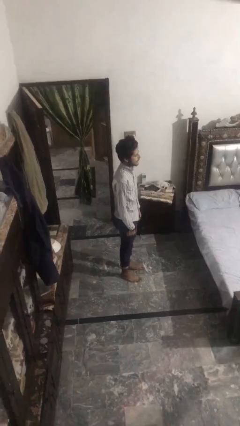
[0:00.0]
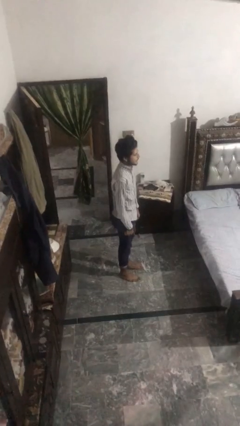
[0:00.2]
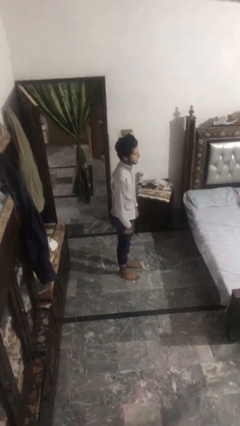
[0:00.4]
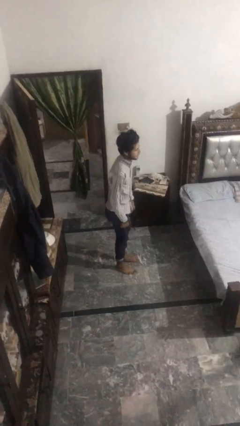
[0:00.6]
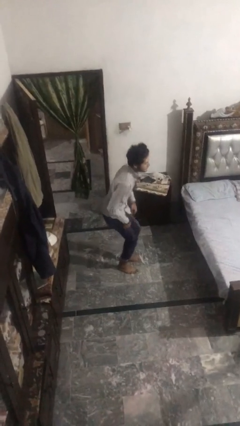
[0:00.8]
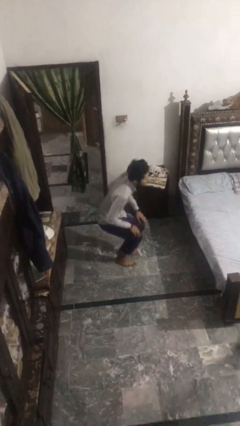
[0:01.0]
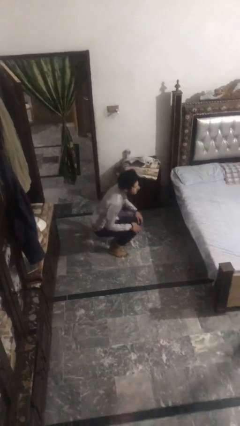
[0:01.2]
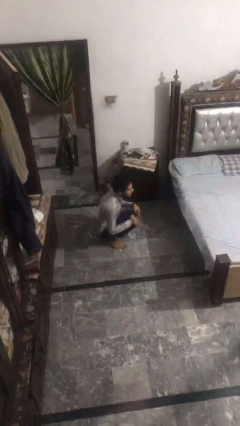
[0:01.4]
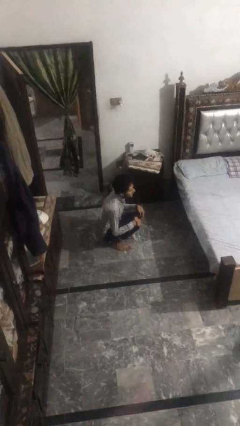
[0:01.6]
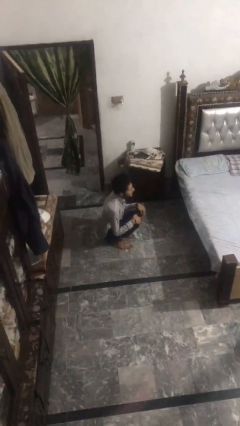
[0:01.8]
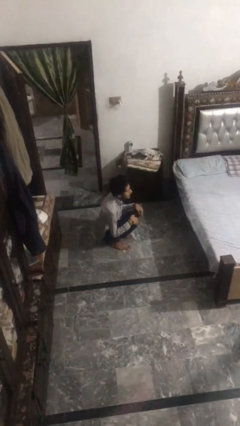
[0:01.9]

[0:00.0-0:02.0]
person squats

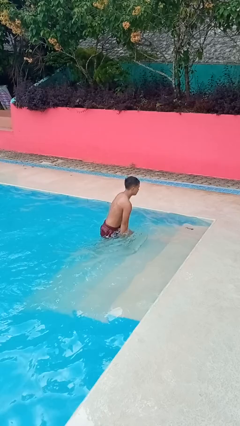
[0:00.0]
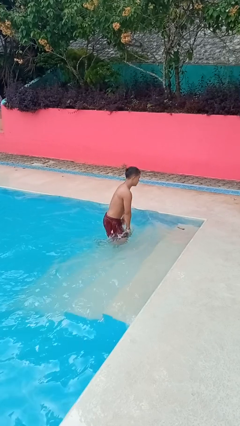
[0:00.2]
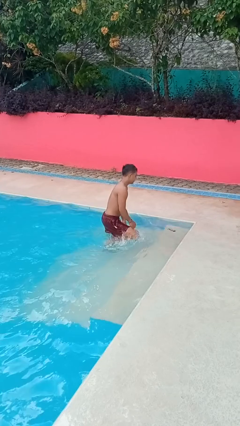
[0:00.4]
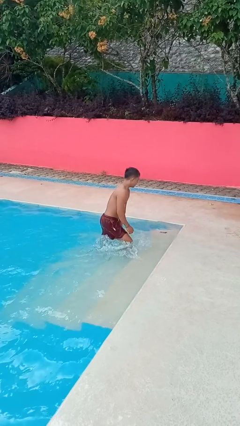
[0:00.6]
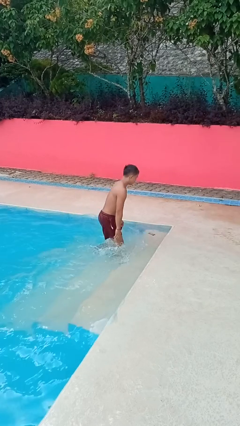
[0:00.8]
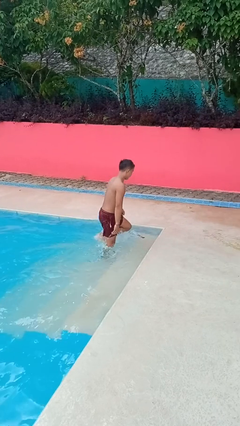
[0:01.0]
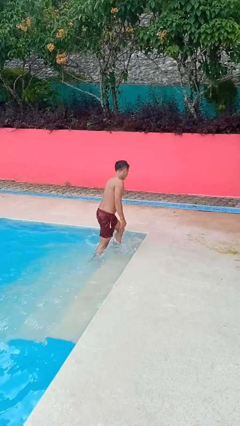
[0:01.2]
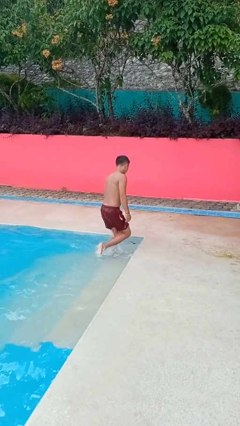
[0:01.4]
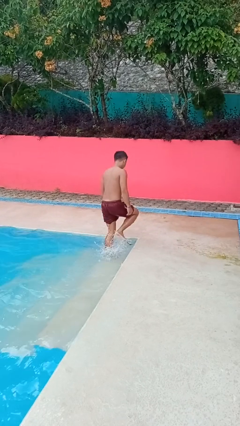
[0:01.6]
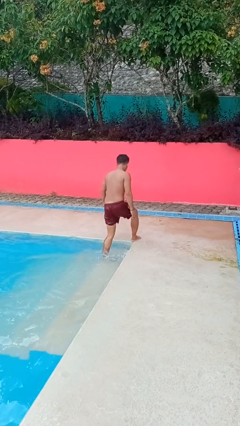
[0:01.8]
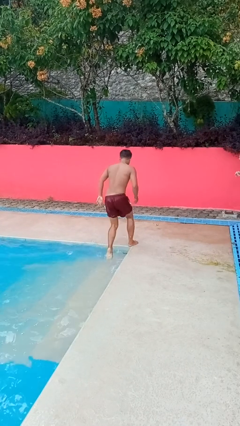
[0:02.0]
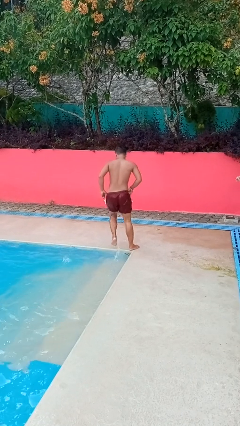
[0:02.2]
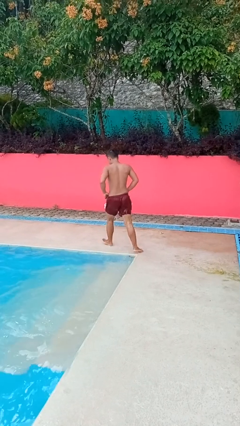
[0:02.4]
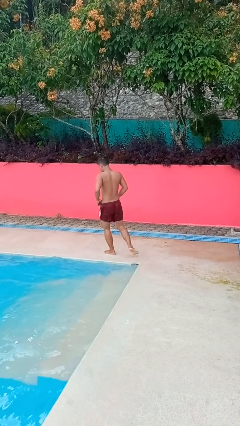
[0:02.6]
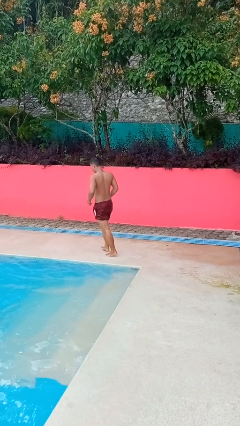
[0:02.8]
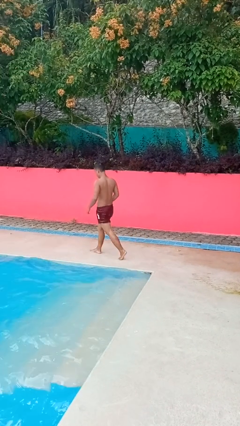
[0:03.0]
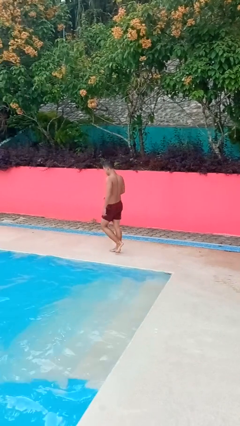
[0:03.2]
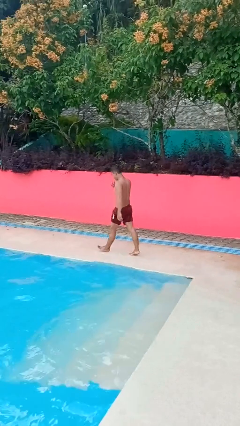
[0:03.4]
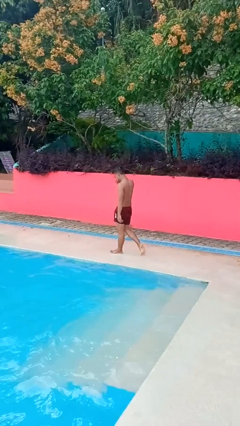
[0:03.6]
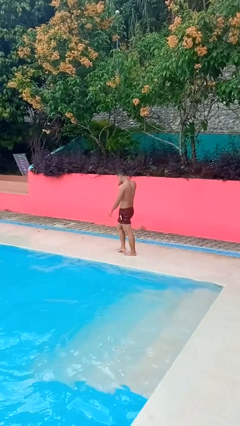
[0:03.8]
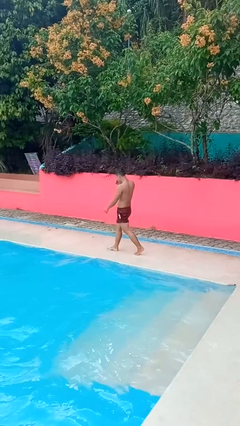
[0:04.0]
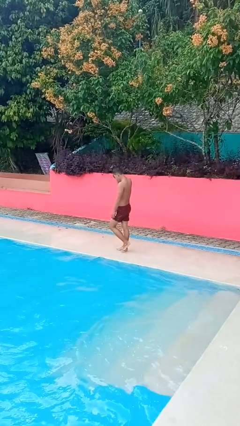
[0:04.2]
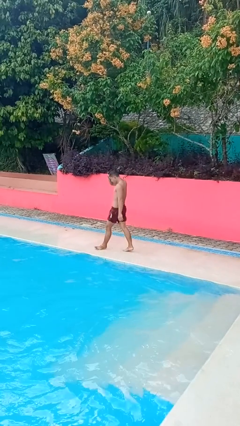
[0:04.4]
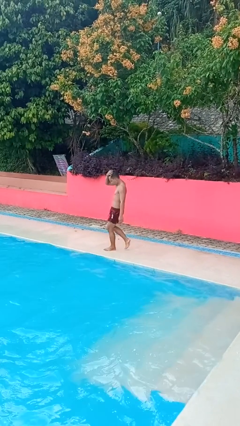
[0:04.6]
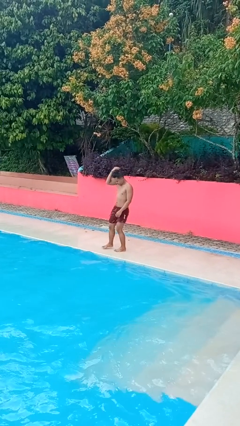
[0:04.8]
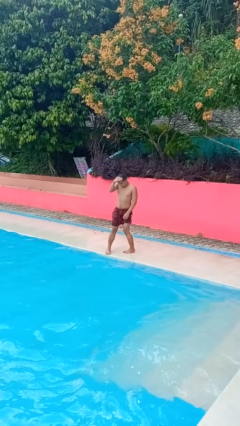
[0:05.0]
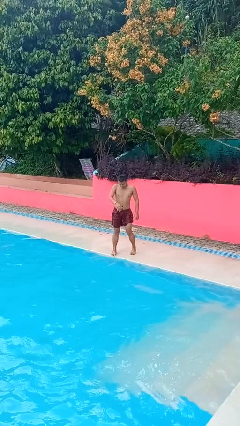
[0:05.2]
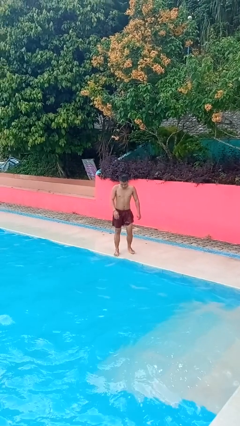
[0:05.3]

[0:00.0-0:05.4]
person exits pool

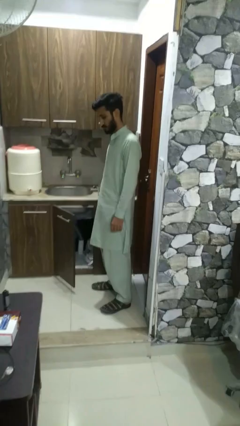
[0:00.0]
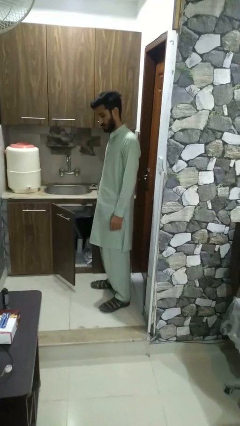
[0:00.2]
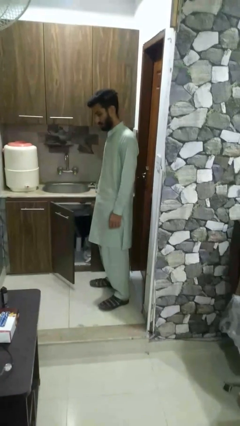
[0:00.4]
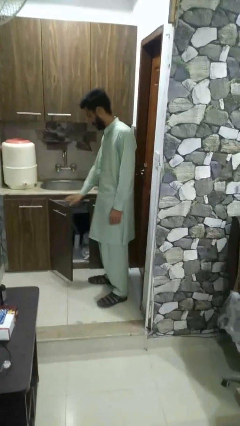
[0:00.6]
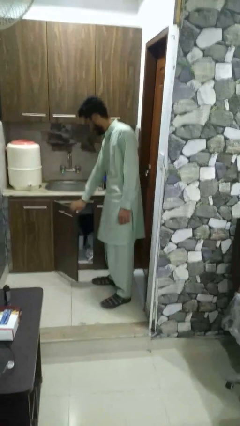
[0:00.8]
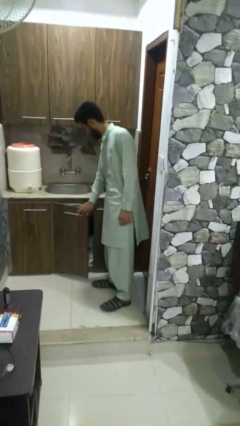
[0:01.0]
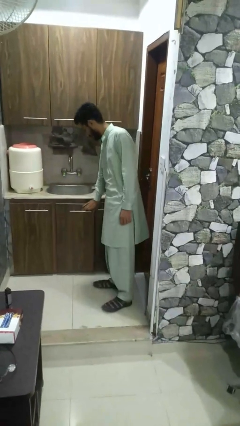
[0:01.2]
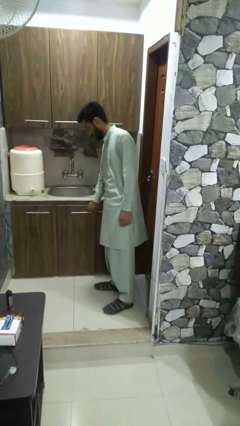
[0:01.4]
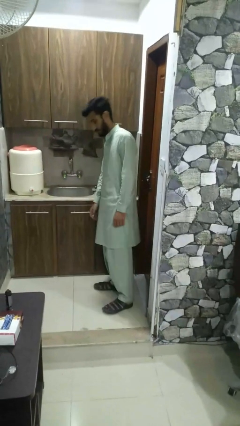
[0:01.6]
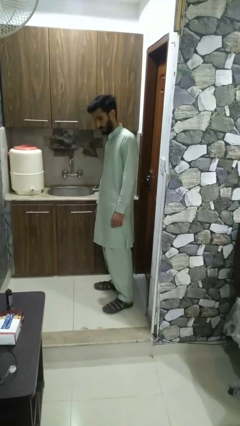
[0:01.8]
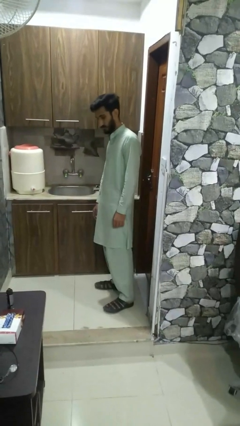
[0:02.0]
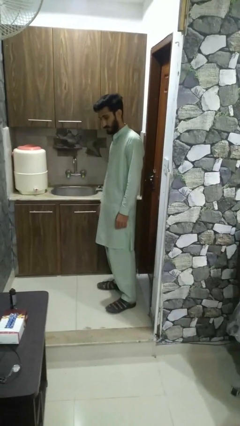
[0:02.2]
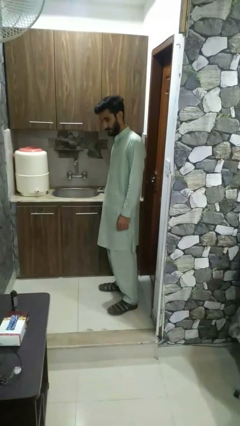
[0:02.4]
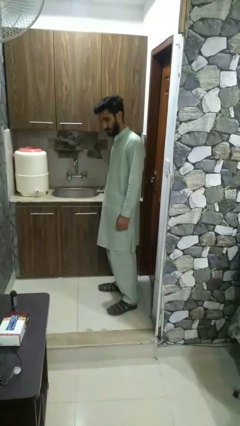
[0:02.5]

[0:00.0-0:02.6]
person closes closet door

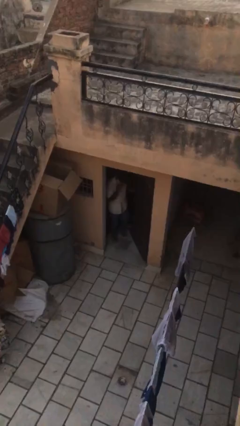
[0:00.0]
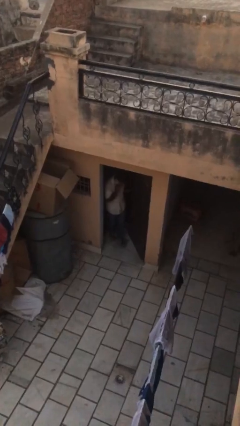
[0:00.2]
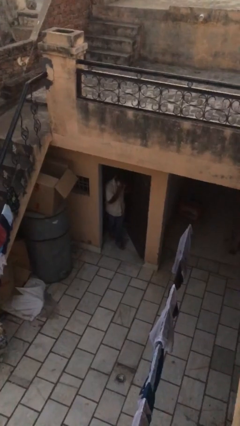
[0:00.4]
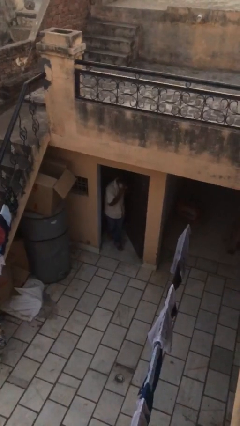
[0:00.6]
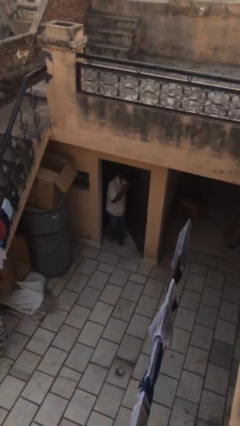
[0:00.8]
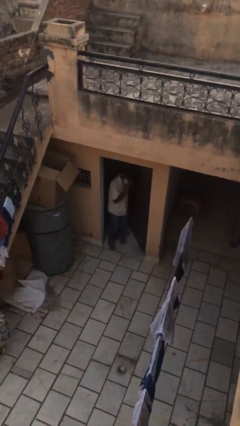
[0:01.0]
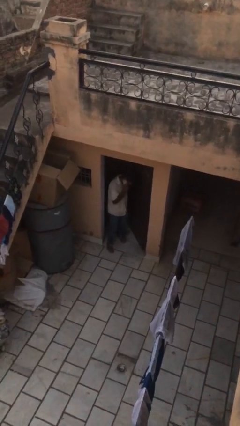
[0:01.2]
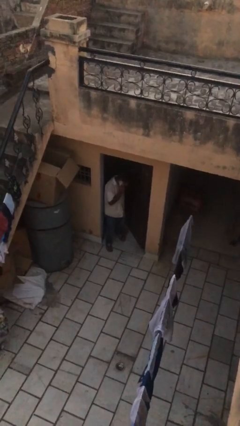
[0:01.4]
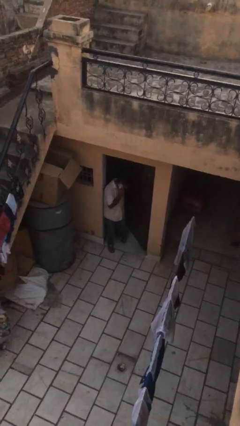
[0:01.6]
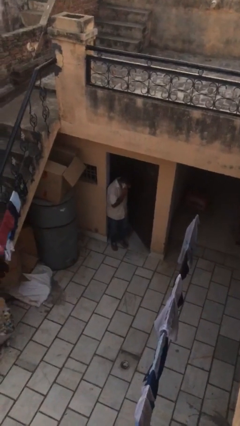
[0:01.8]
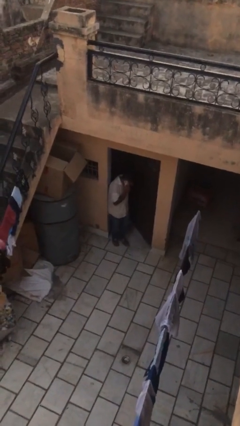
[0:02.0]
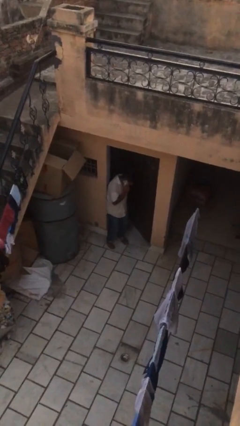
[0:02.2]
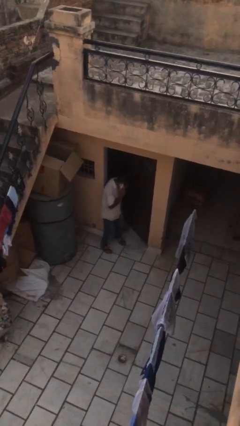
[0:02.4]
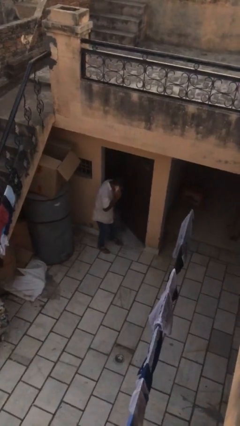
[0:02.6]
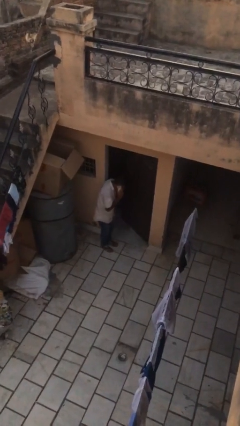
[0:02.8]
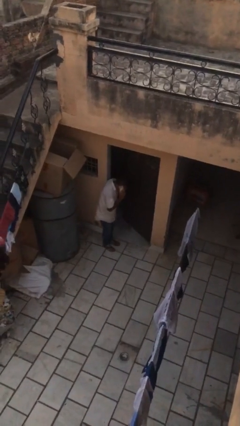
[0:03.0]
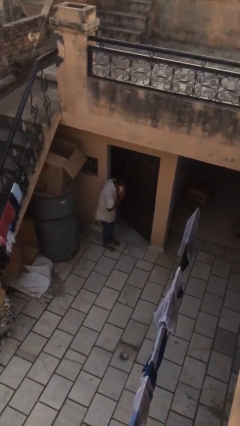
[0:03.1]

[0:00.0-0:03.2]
person enters scene through structure

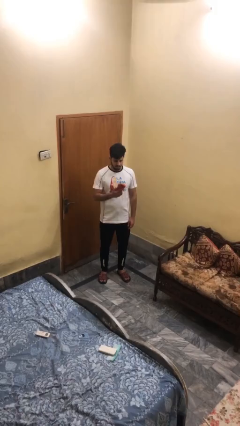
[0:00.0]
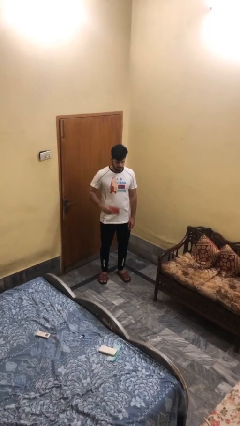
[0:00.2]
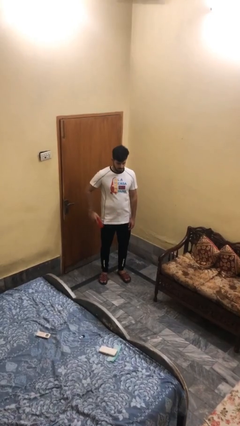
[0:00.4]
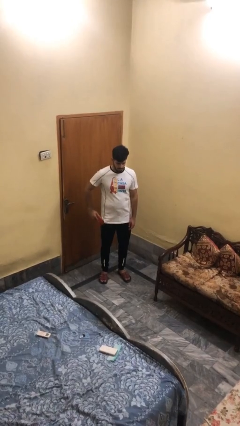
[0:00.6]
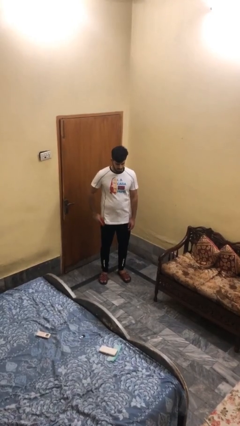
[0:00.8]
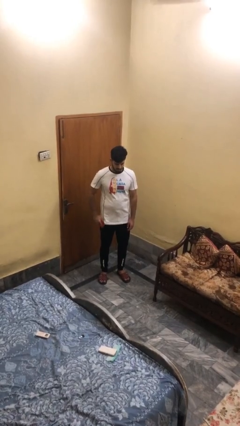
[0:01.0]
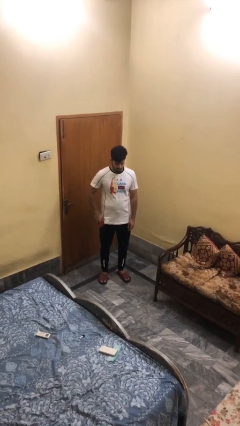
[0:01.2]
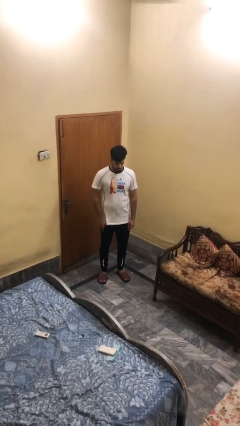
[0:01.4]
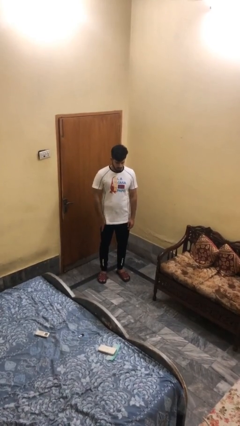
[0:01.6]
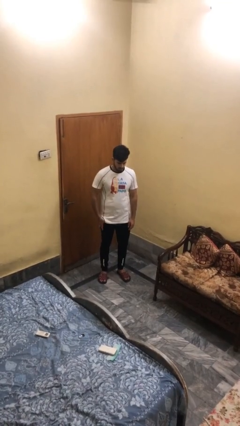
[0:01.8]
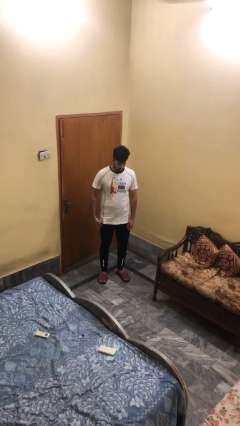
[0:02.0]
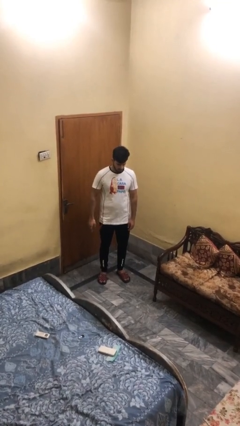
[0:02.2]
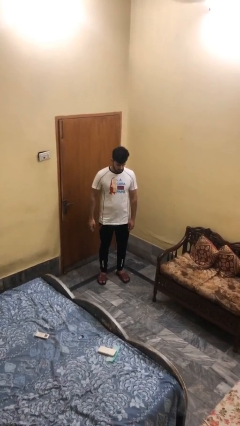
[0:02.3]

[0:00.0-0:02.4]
person puts phone into pocket

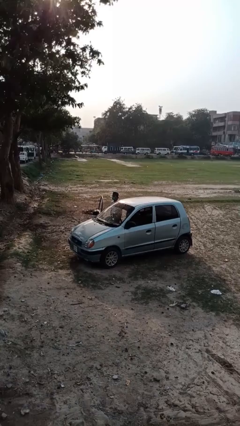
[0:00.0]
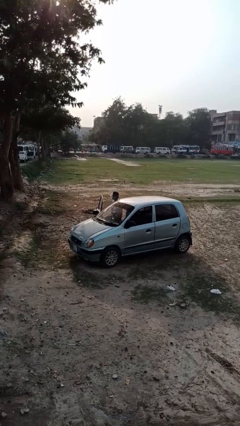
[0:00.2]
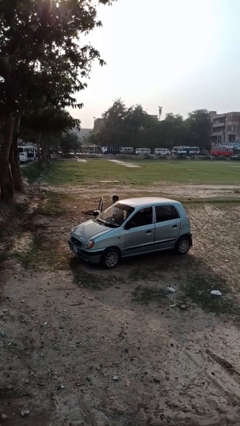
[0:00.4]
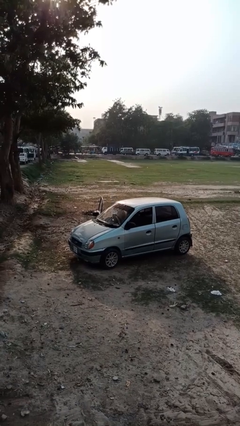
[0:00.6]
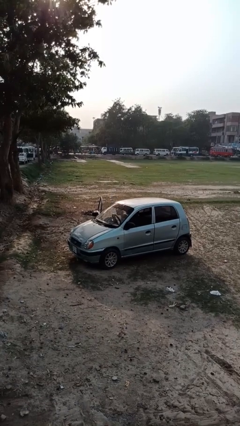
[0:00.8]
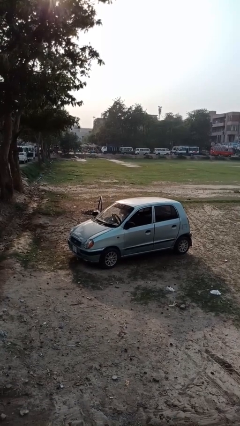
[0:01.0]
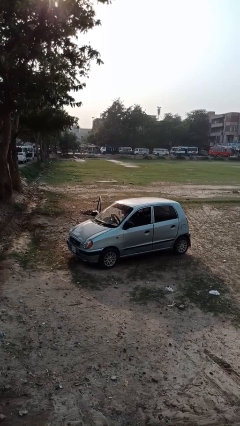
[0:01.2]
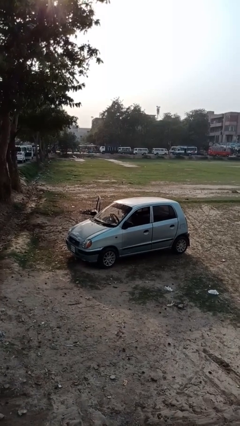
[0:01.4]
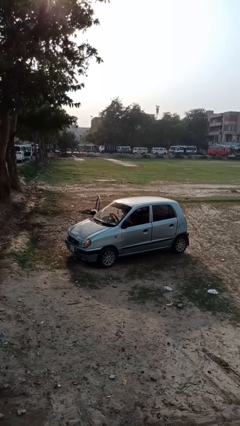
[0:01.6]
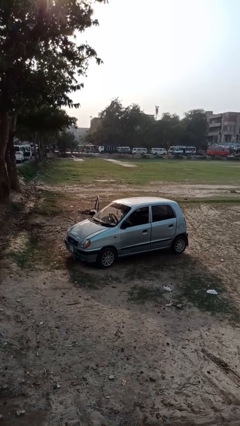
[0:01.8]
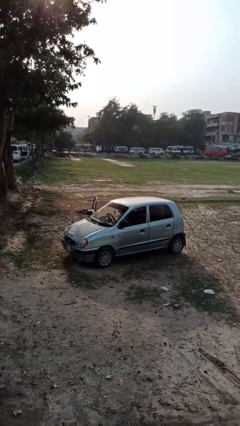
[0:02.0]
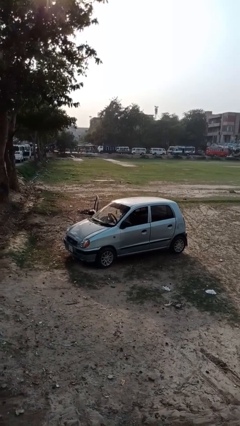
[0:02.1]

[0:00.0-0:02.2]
person enters car
